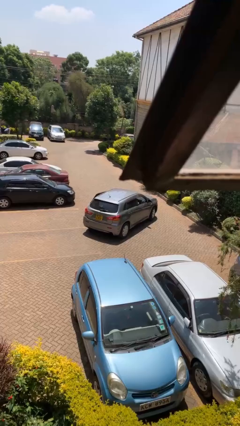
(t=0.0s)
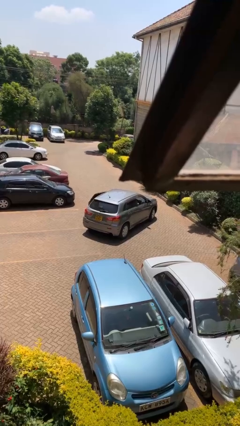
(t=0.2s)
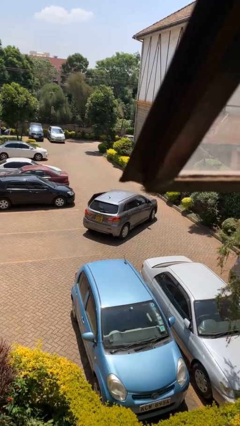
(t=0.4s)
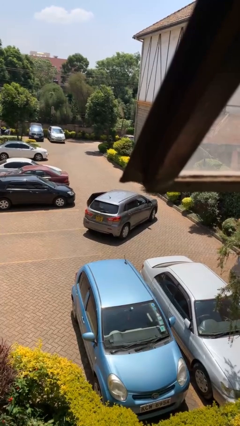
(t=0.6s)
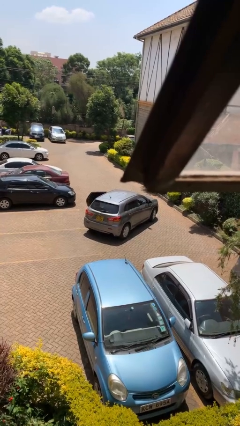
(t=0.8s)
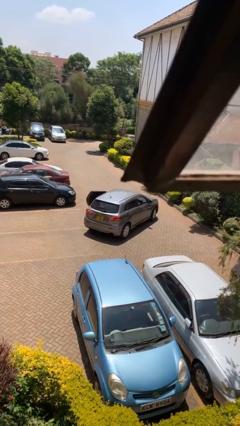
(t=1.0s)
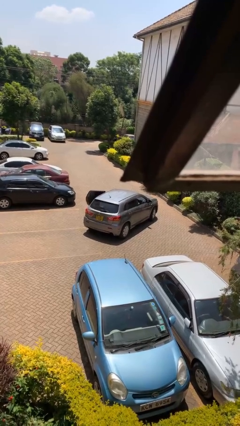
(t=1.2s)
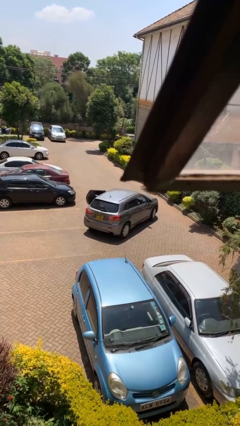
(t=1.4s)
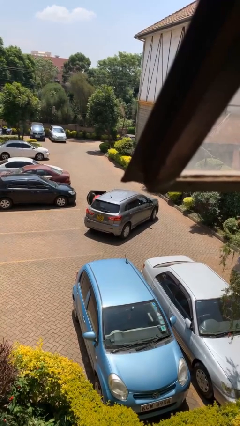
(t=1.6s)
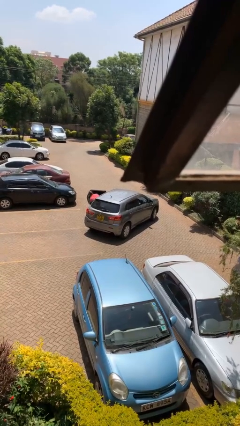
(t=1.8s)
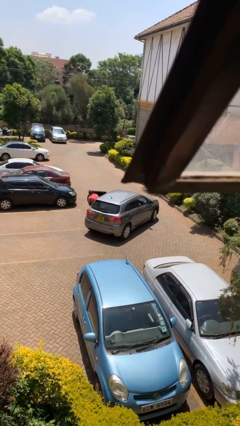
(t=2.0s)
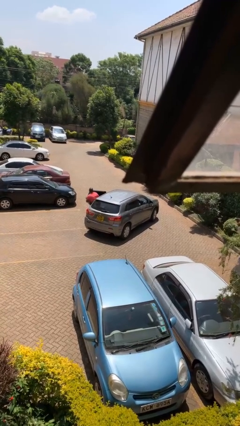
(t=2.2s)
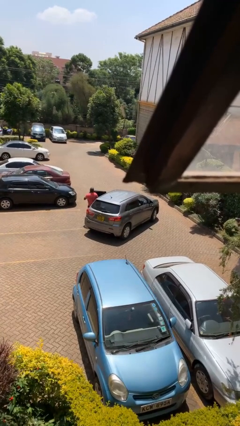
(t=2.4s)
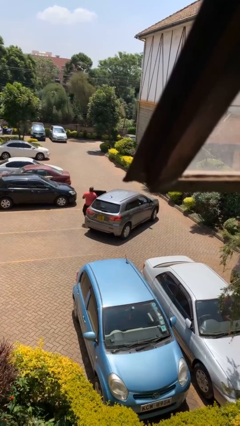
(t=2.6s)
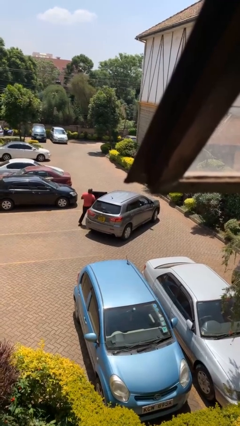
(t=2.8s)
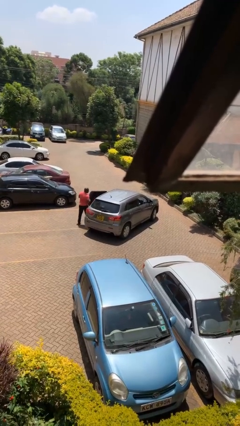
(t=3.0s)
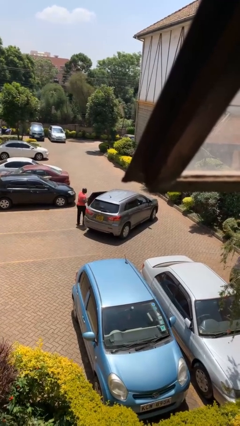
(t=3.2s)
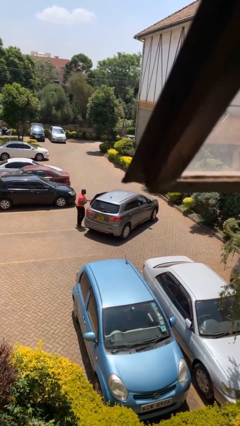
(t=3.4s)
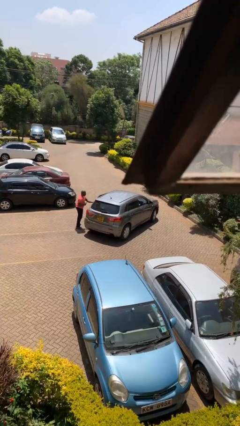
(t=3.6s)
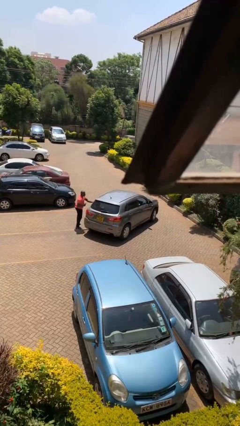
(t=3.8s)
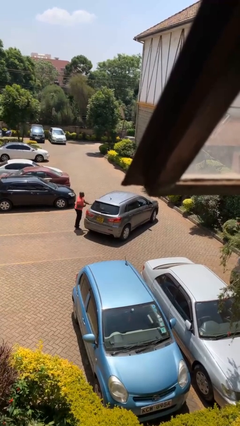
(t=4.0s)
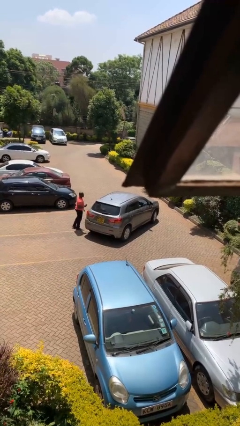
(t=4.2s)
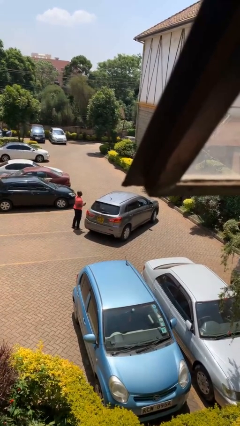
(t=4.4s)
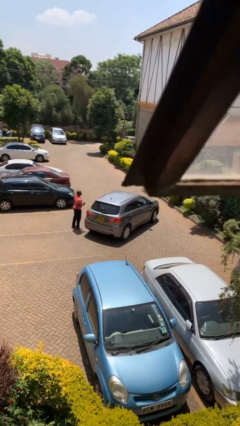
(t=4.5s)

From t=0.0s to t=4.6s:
car drops off person

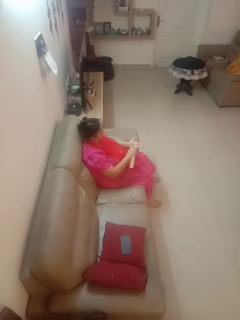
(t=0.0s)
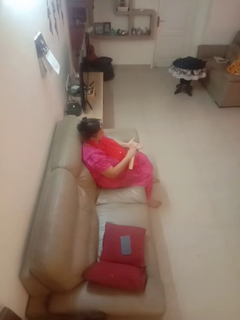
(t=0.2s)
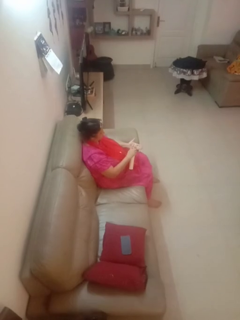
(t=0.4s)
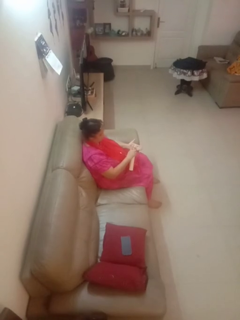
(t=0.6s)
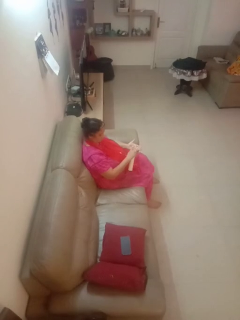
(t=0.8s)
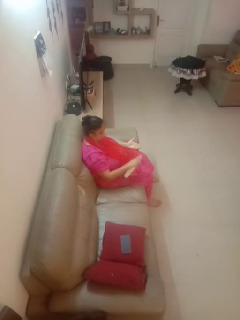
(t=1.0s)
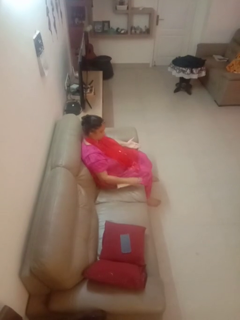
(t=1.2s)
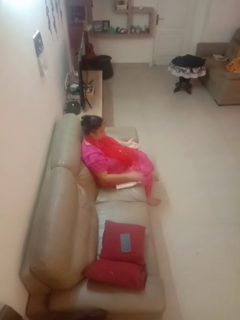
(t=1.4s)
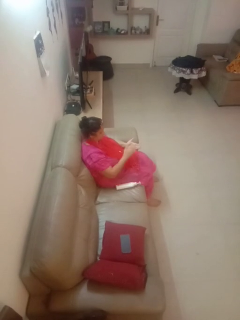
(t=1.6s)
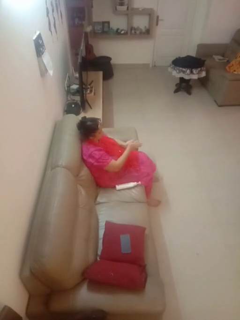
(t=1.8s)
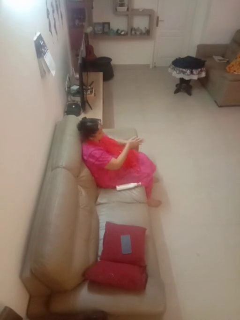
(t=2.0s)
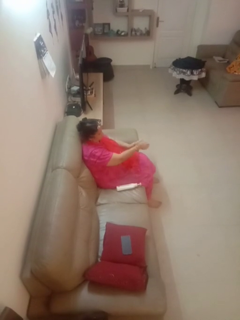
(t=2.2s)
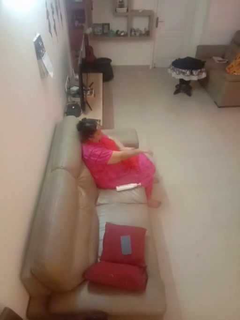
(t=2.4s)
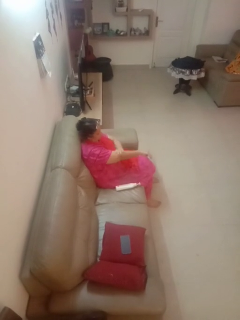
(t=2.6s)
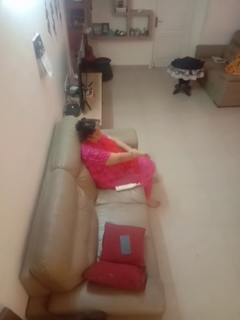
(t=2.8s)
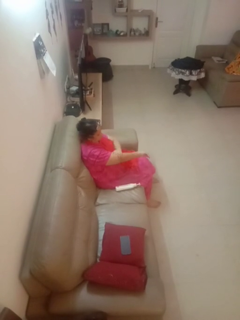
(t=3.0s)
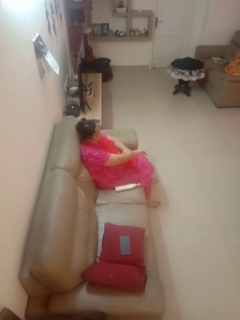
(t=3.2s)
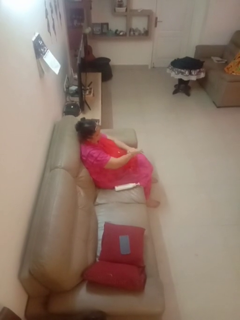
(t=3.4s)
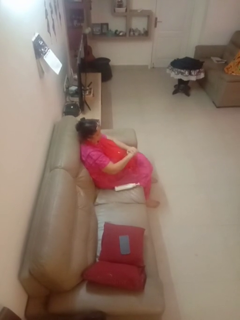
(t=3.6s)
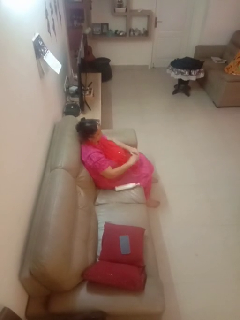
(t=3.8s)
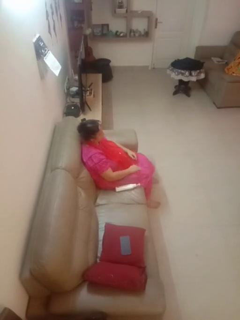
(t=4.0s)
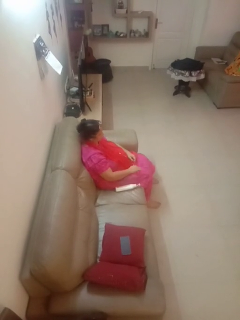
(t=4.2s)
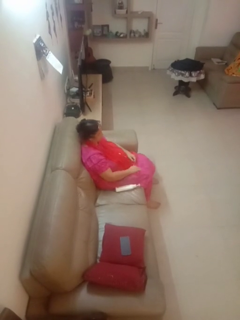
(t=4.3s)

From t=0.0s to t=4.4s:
person applies sunscreen

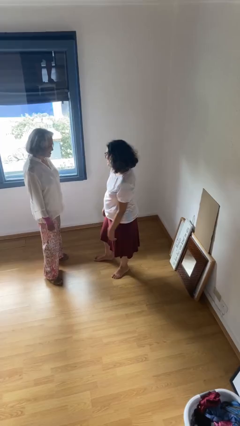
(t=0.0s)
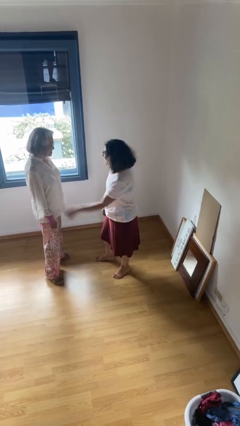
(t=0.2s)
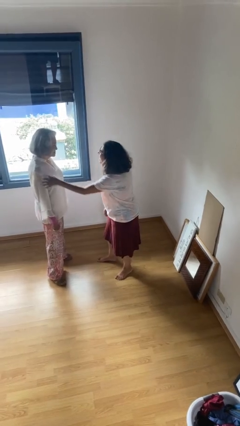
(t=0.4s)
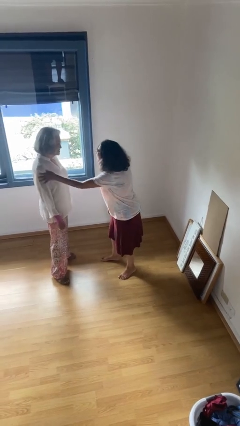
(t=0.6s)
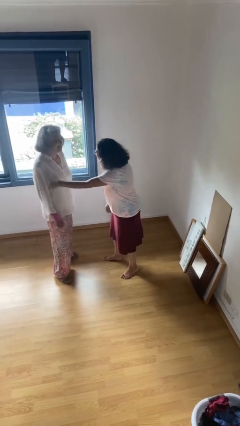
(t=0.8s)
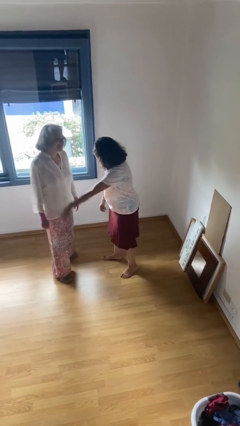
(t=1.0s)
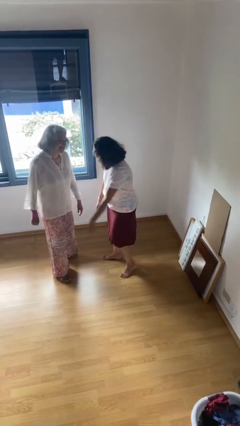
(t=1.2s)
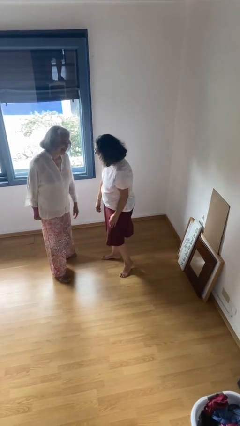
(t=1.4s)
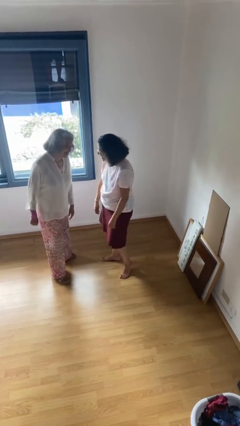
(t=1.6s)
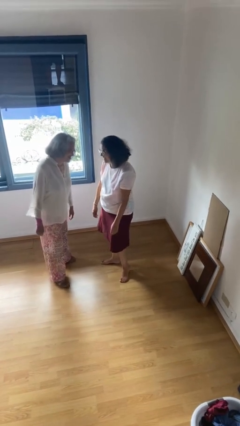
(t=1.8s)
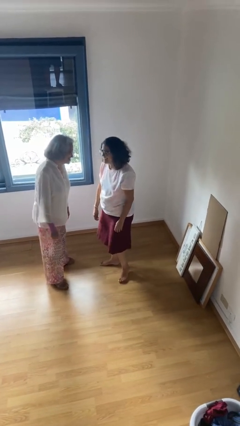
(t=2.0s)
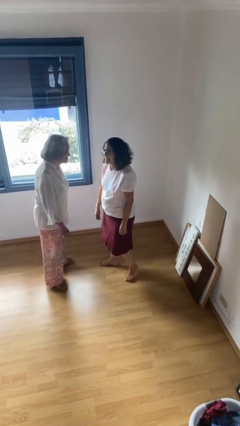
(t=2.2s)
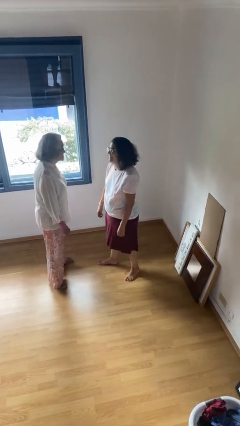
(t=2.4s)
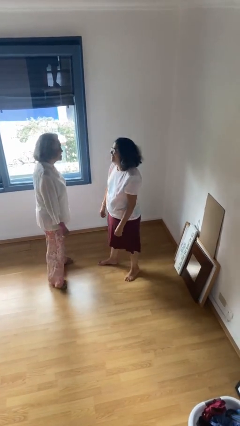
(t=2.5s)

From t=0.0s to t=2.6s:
person shoves person

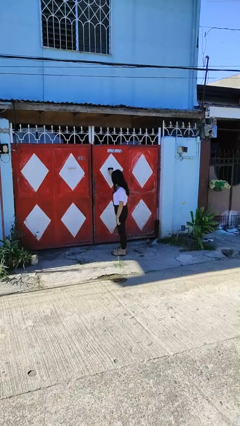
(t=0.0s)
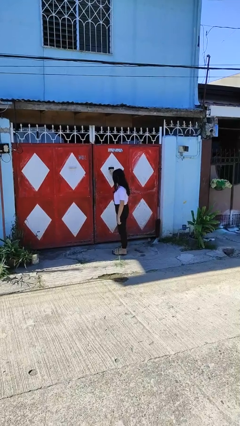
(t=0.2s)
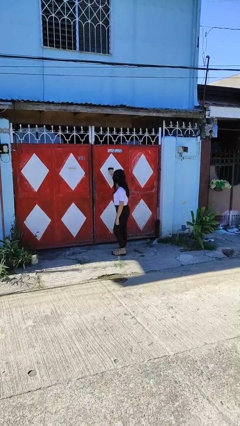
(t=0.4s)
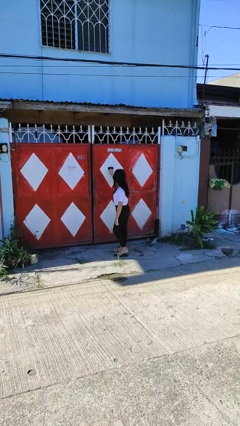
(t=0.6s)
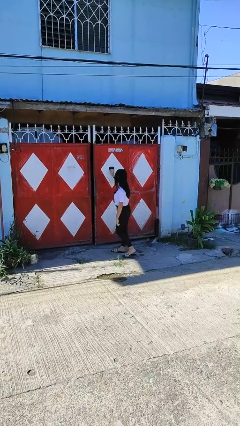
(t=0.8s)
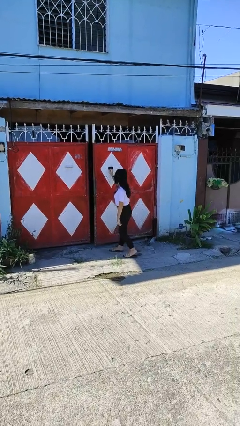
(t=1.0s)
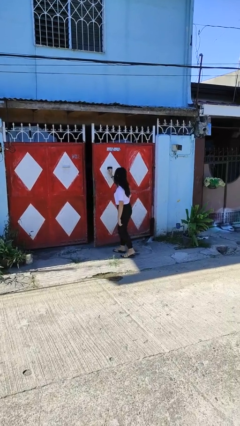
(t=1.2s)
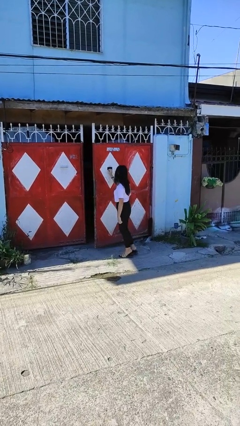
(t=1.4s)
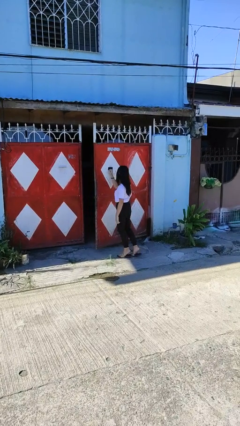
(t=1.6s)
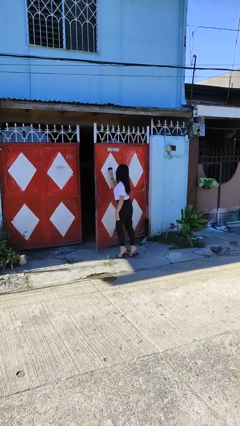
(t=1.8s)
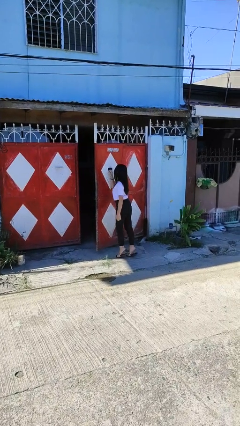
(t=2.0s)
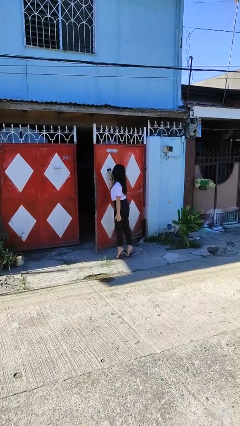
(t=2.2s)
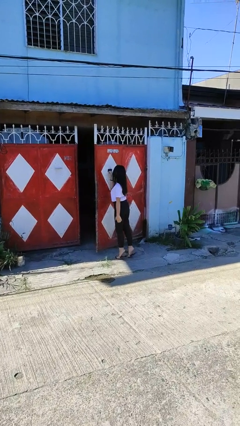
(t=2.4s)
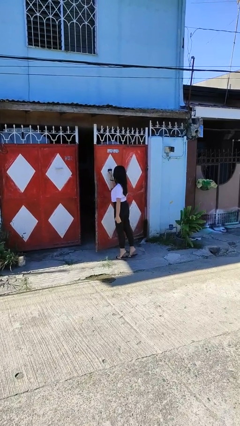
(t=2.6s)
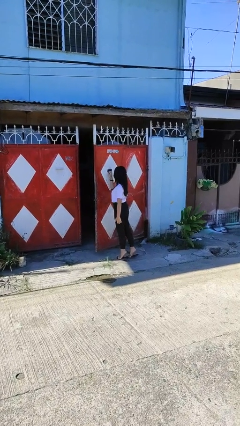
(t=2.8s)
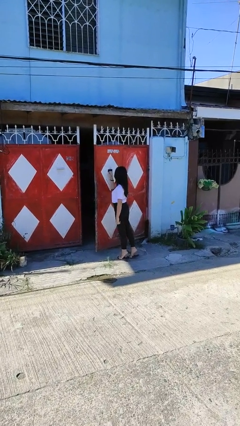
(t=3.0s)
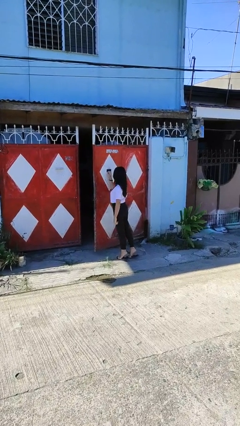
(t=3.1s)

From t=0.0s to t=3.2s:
person opens gate

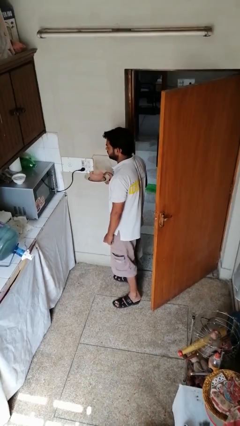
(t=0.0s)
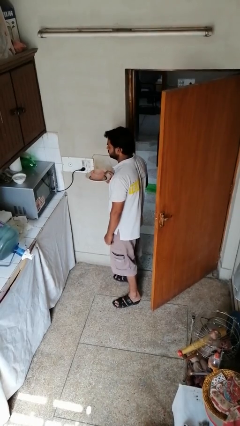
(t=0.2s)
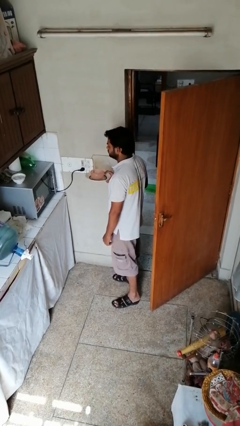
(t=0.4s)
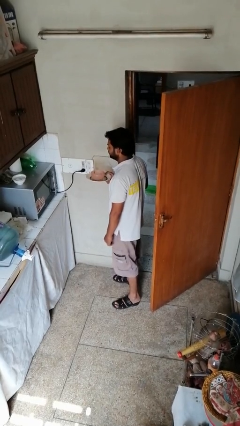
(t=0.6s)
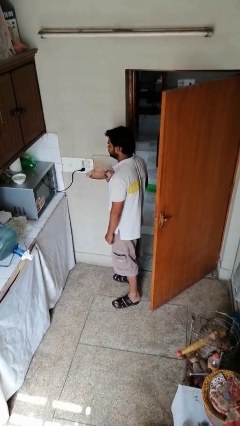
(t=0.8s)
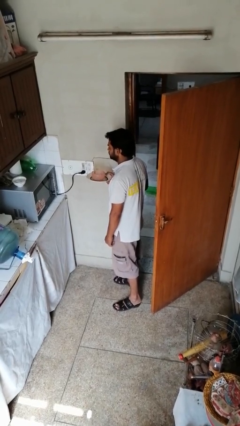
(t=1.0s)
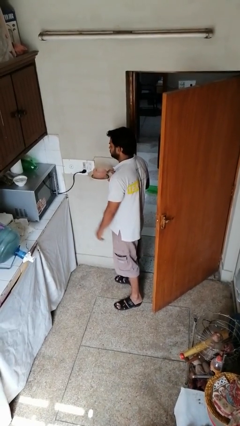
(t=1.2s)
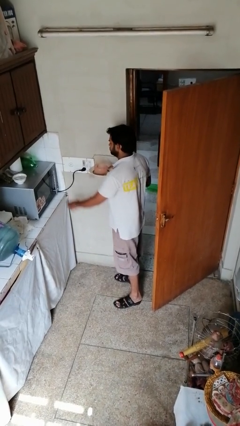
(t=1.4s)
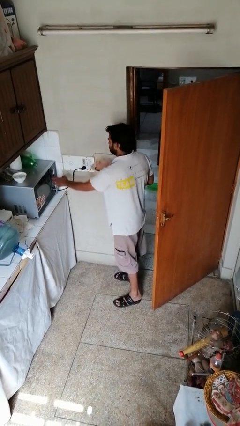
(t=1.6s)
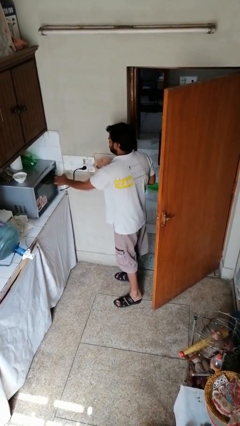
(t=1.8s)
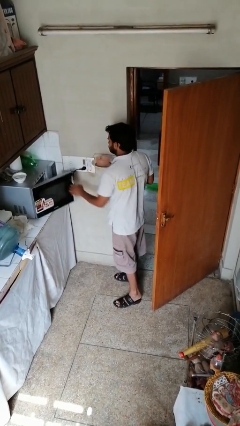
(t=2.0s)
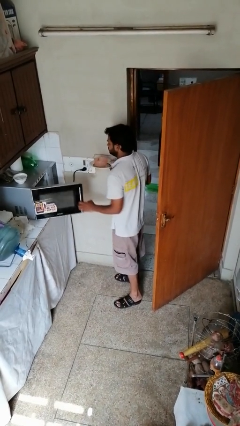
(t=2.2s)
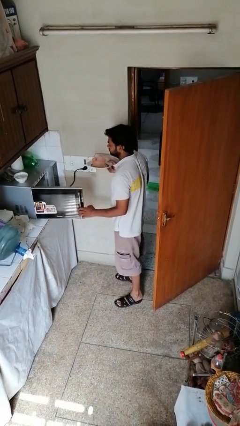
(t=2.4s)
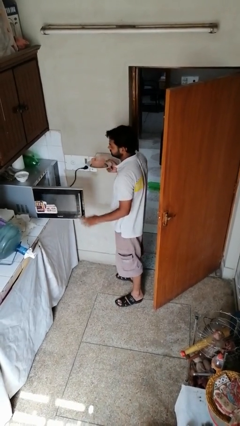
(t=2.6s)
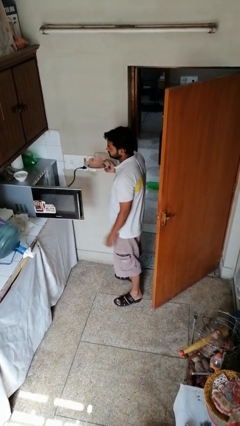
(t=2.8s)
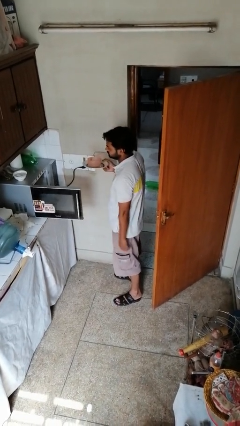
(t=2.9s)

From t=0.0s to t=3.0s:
person opens microwave

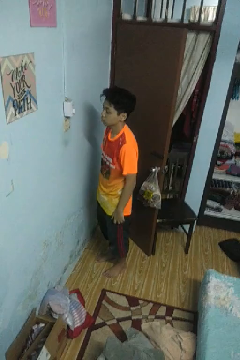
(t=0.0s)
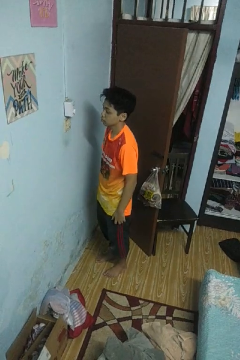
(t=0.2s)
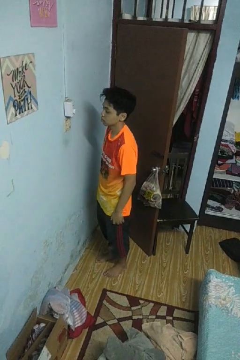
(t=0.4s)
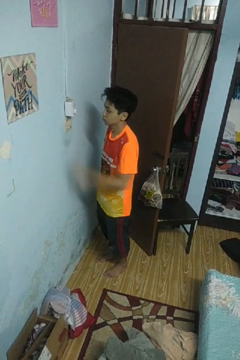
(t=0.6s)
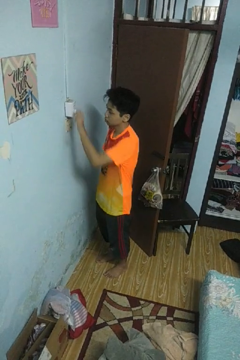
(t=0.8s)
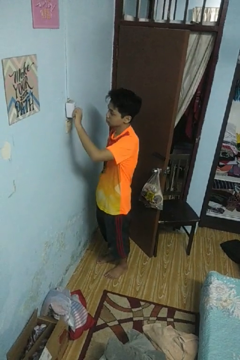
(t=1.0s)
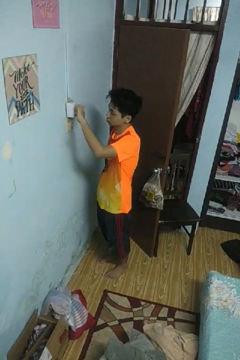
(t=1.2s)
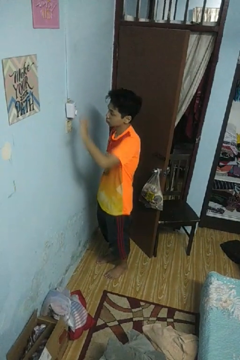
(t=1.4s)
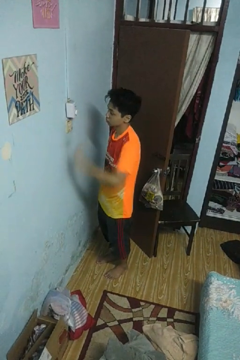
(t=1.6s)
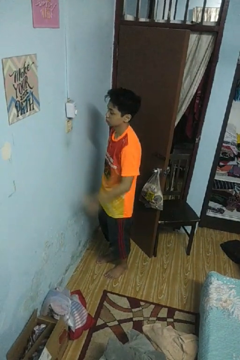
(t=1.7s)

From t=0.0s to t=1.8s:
person adjusts thermostat
